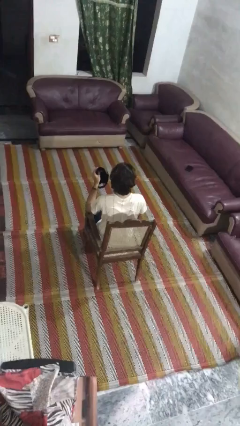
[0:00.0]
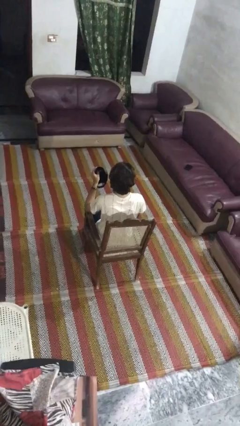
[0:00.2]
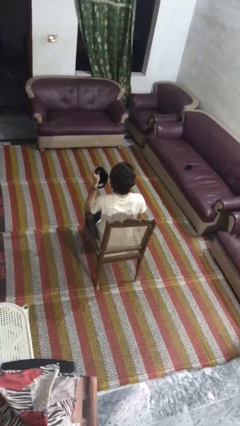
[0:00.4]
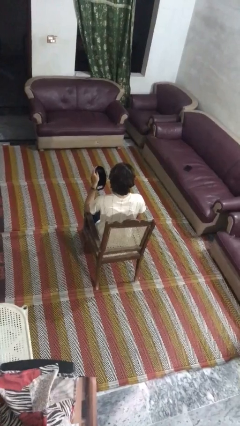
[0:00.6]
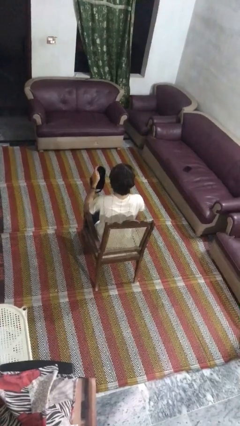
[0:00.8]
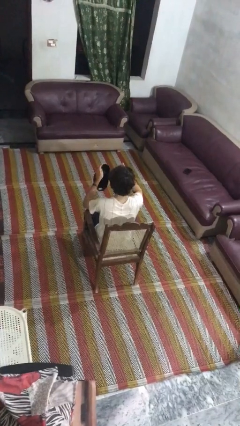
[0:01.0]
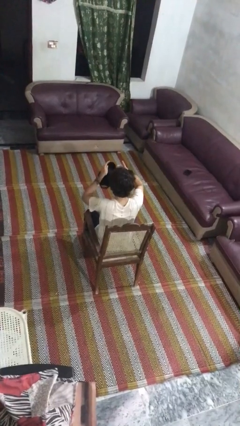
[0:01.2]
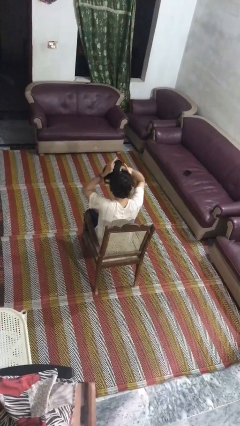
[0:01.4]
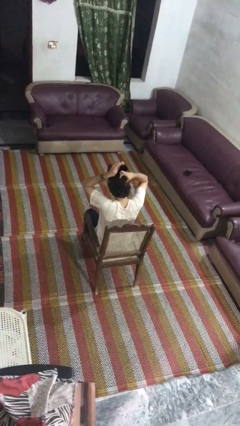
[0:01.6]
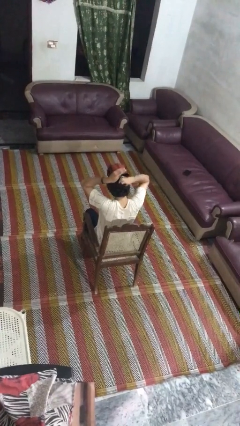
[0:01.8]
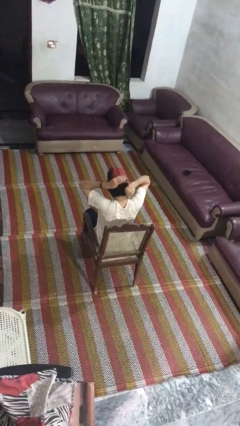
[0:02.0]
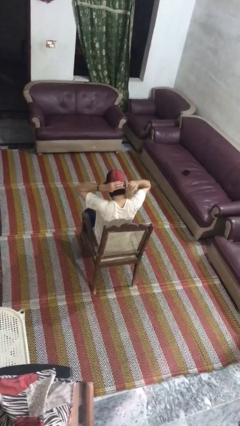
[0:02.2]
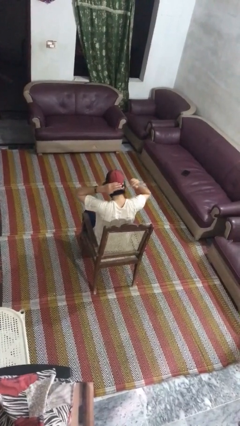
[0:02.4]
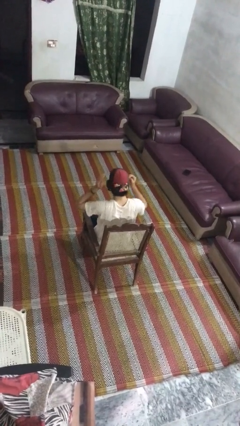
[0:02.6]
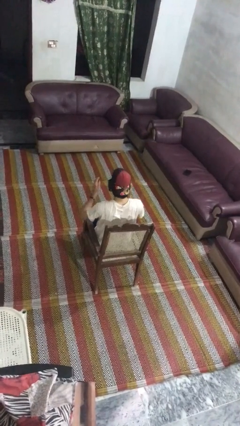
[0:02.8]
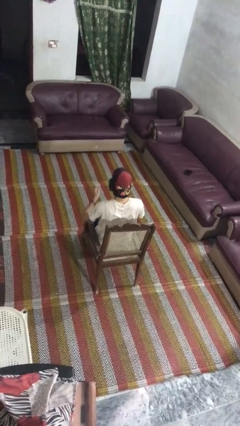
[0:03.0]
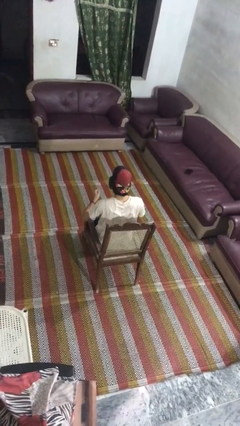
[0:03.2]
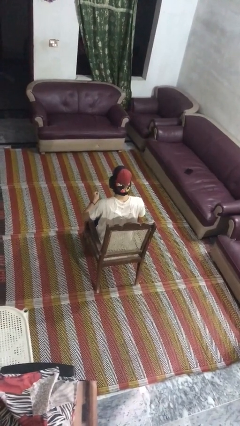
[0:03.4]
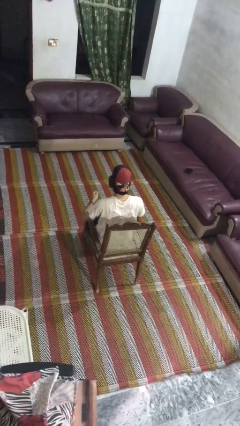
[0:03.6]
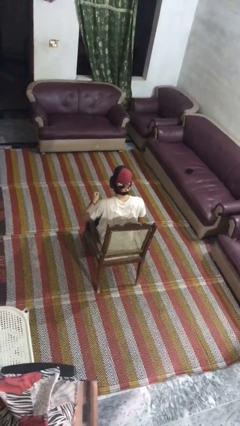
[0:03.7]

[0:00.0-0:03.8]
person puts on hat

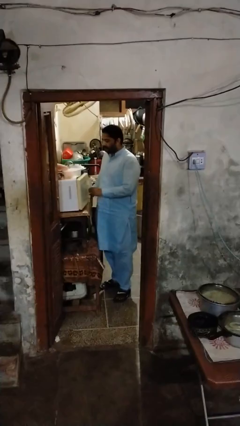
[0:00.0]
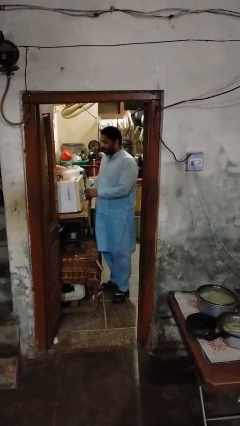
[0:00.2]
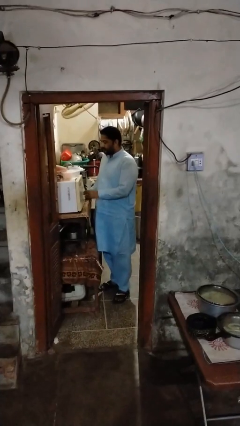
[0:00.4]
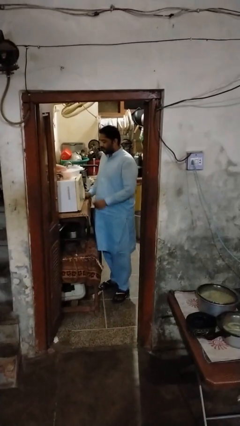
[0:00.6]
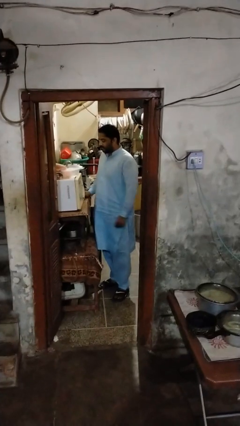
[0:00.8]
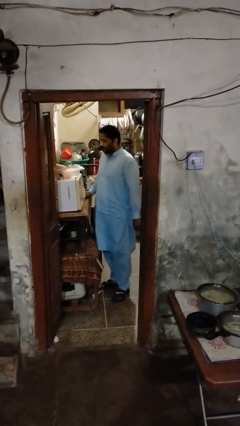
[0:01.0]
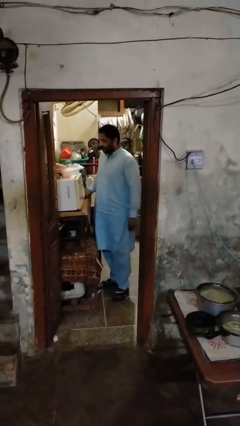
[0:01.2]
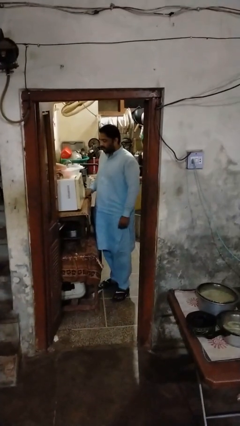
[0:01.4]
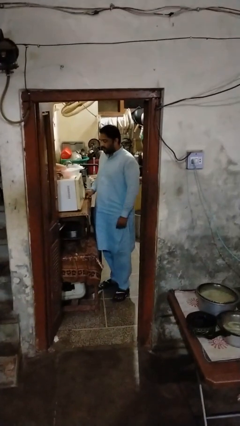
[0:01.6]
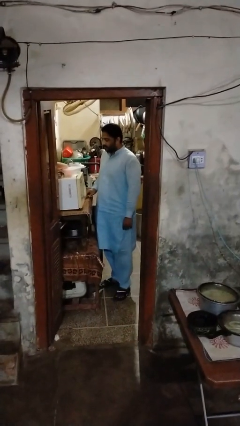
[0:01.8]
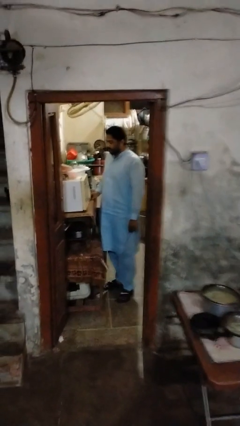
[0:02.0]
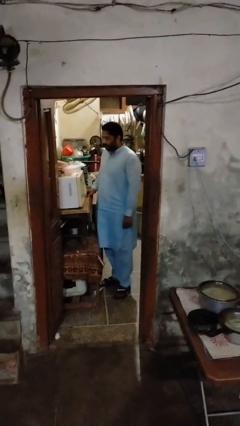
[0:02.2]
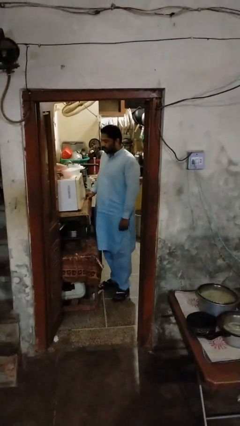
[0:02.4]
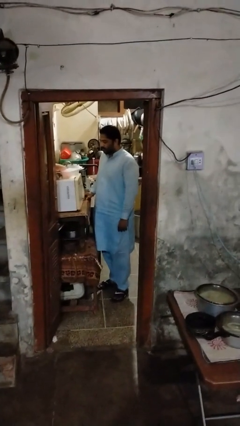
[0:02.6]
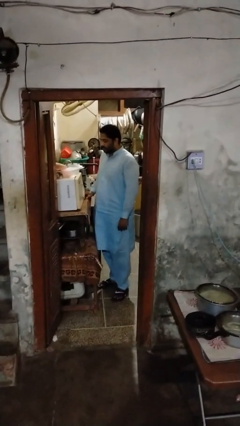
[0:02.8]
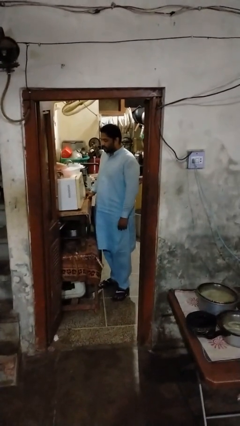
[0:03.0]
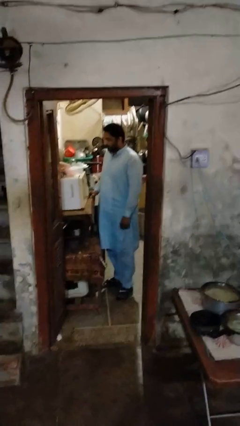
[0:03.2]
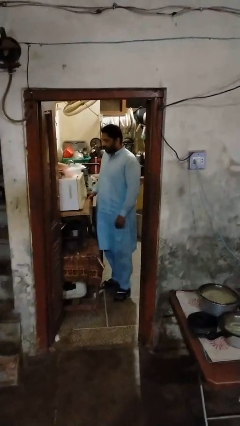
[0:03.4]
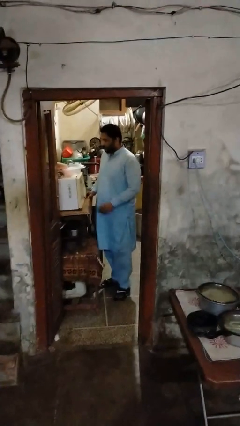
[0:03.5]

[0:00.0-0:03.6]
person lies down on bed

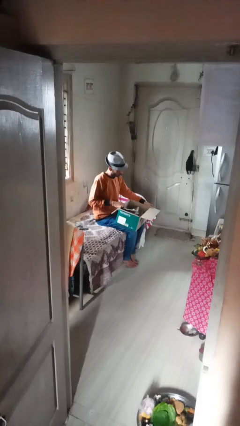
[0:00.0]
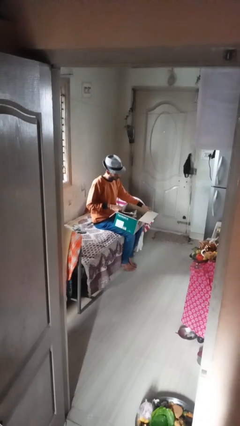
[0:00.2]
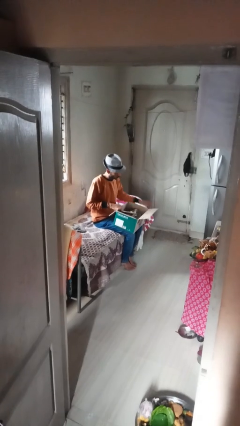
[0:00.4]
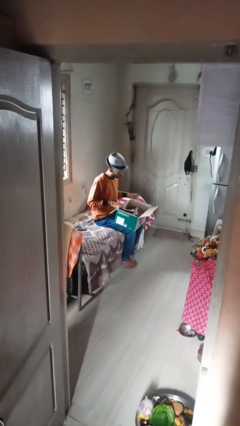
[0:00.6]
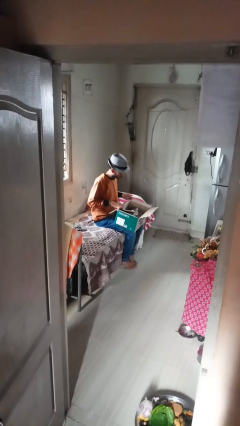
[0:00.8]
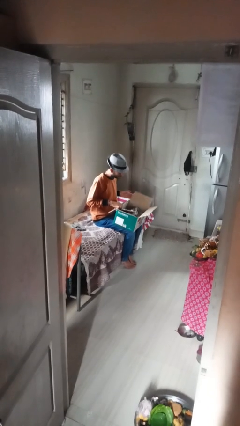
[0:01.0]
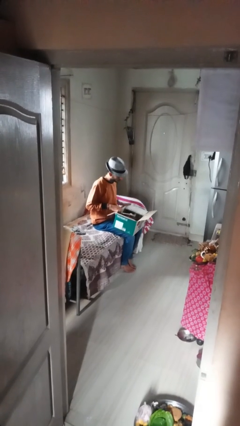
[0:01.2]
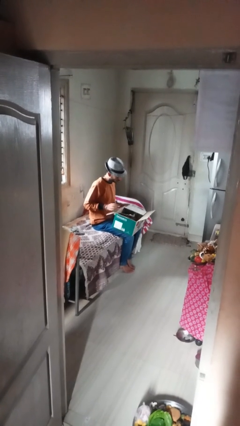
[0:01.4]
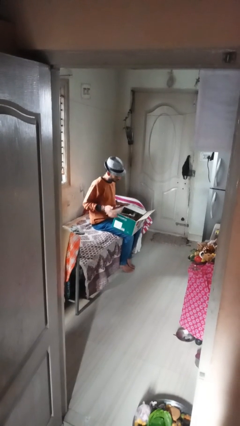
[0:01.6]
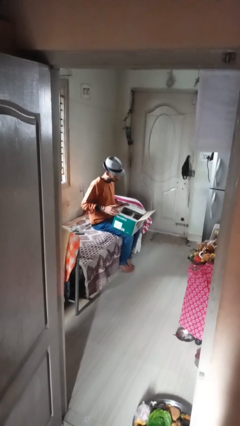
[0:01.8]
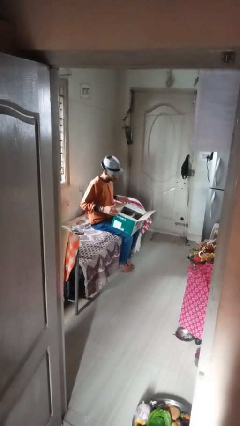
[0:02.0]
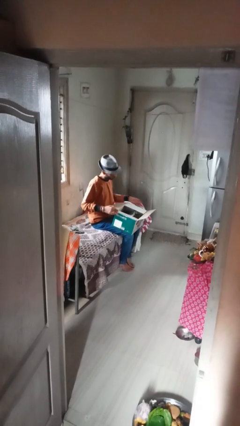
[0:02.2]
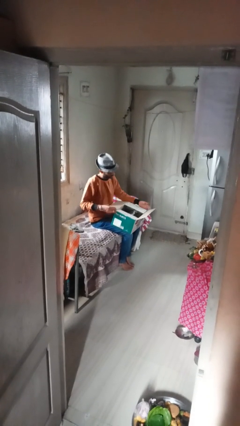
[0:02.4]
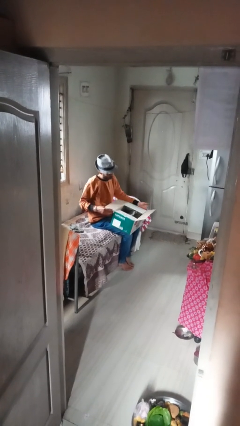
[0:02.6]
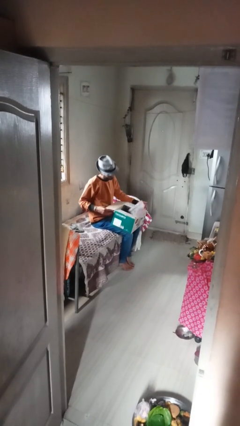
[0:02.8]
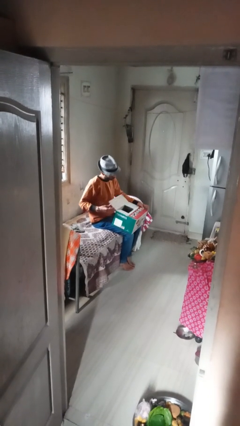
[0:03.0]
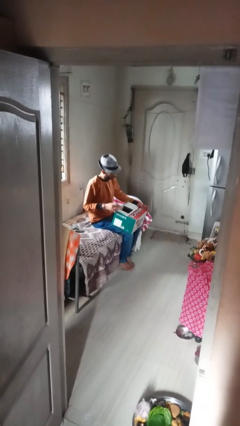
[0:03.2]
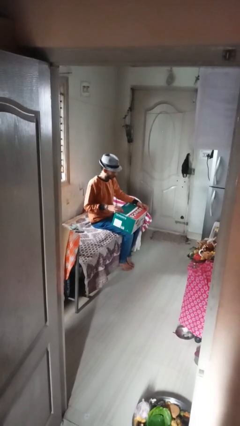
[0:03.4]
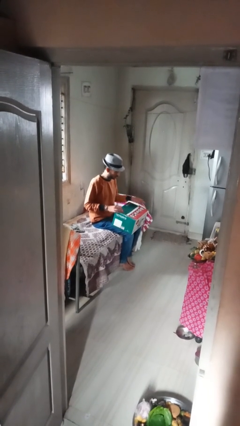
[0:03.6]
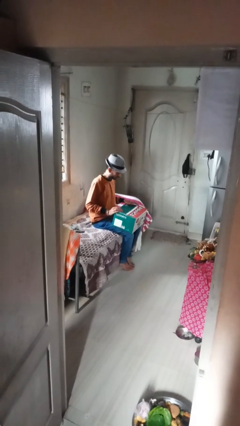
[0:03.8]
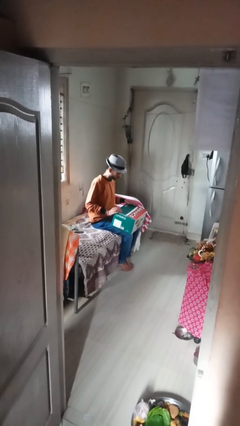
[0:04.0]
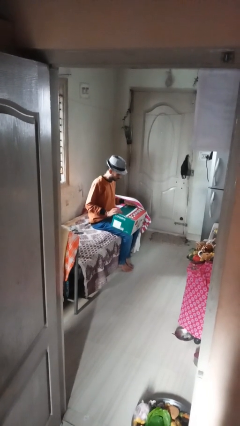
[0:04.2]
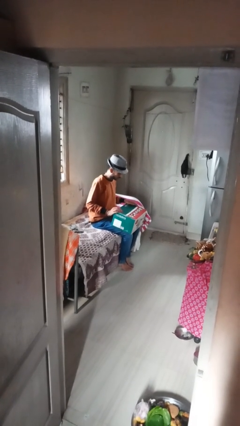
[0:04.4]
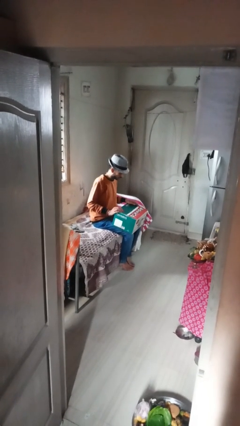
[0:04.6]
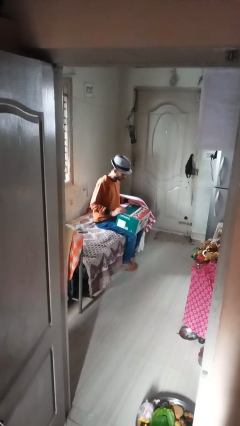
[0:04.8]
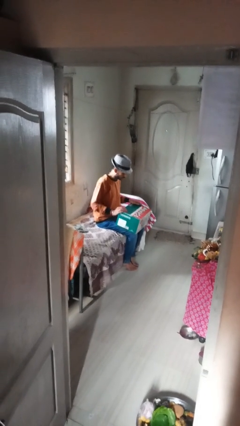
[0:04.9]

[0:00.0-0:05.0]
person closes box

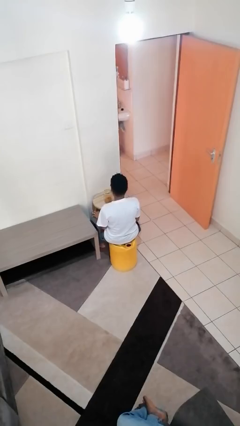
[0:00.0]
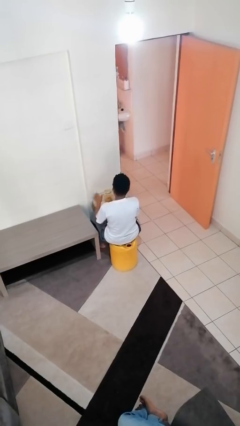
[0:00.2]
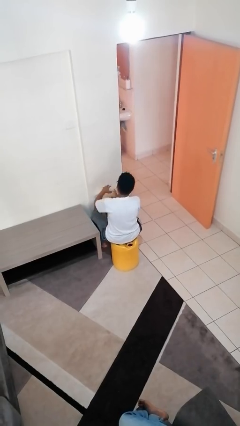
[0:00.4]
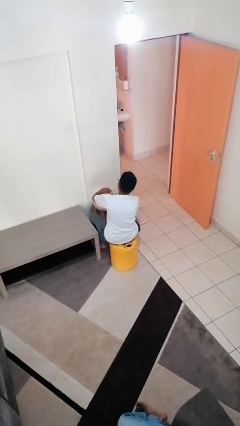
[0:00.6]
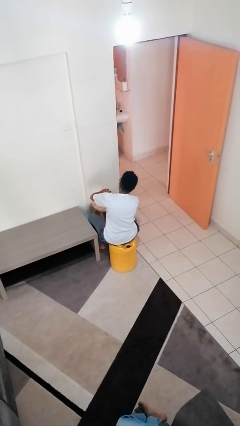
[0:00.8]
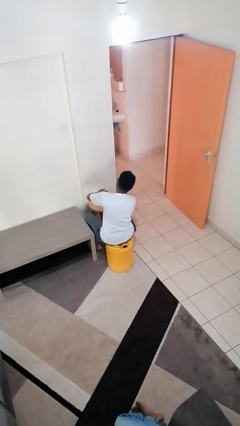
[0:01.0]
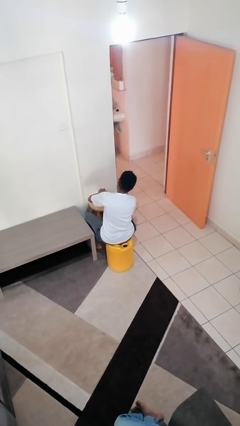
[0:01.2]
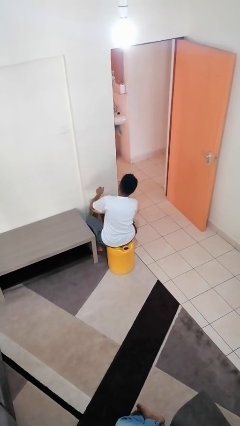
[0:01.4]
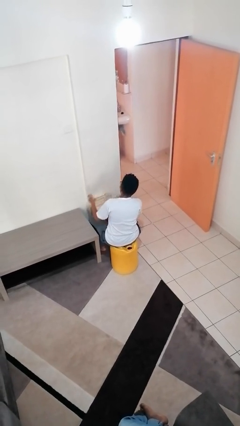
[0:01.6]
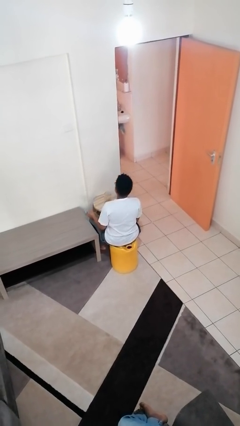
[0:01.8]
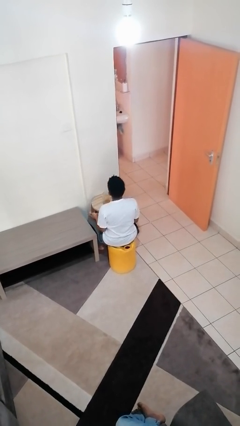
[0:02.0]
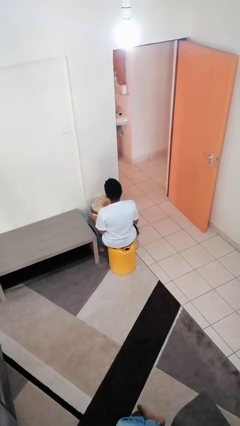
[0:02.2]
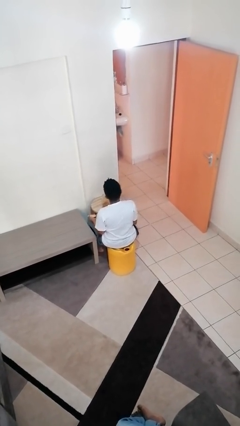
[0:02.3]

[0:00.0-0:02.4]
person opens jar

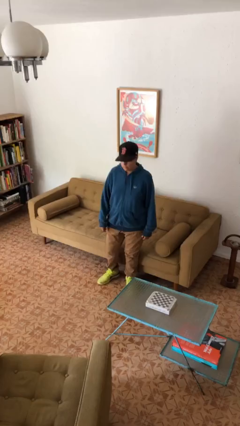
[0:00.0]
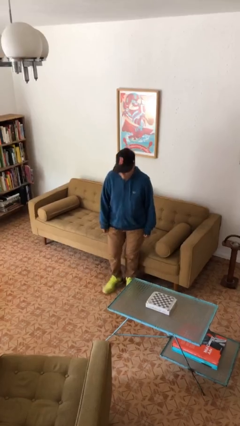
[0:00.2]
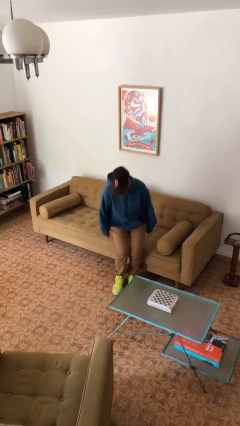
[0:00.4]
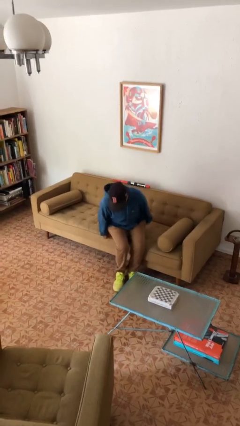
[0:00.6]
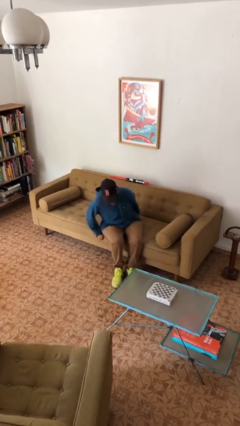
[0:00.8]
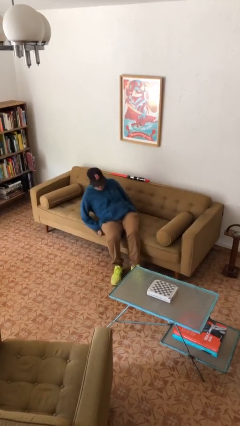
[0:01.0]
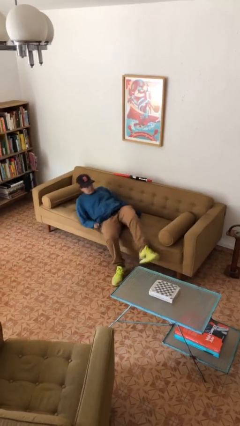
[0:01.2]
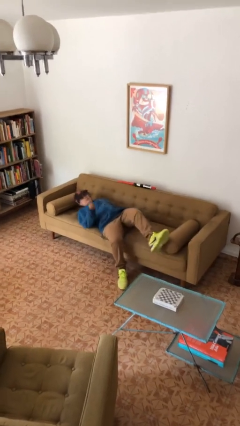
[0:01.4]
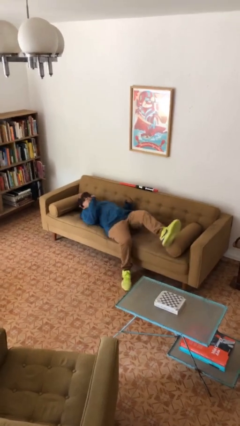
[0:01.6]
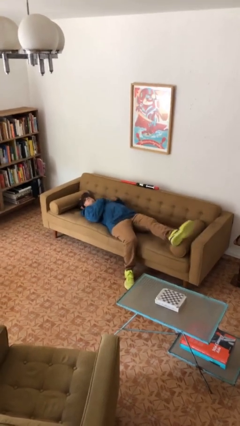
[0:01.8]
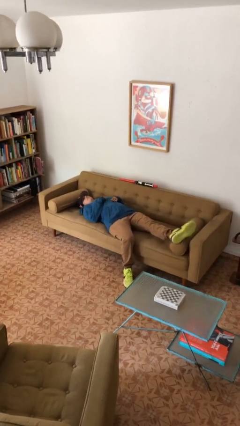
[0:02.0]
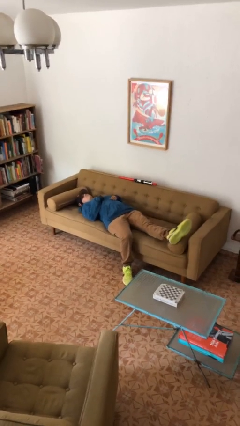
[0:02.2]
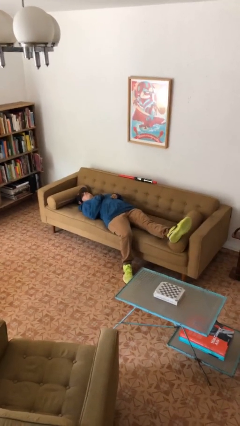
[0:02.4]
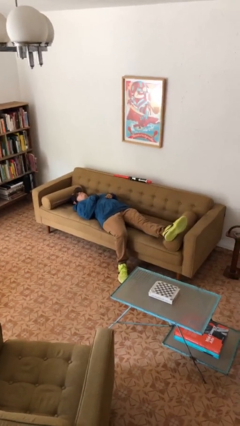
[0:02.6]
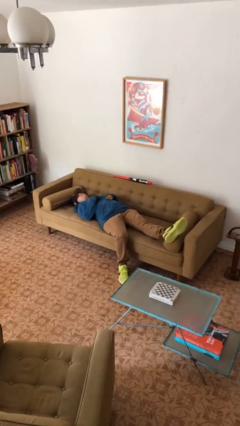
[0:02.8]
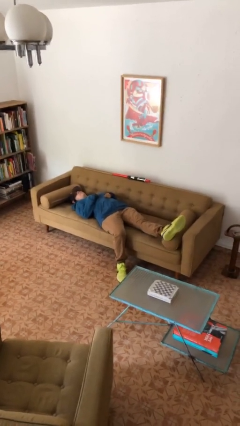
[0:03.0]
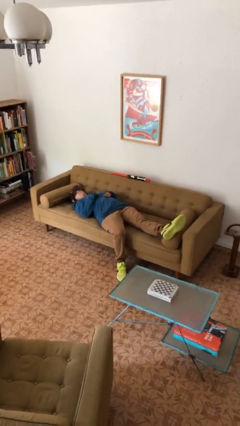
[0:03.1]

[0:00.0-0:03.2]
person lies down on couch
